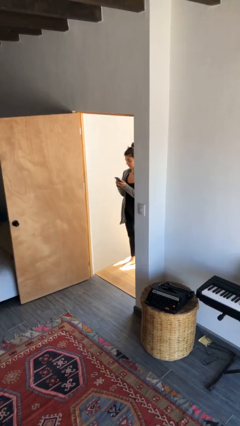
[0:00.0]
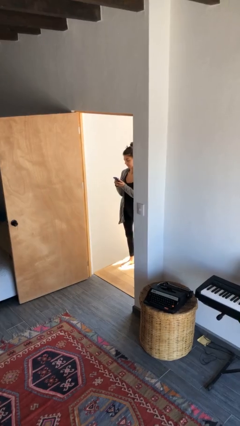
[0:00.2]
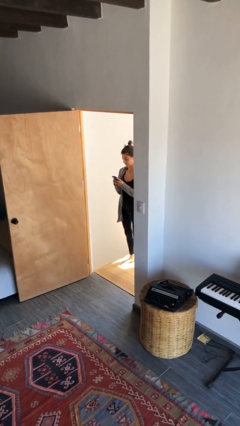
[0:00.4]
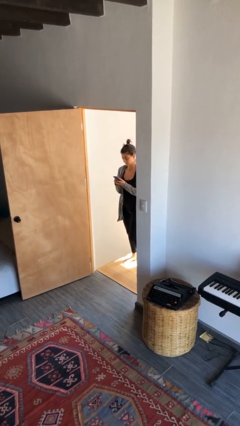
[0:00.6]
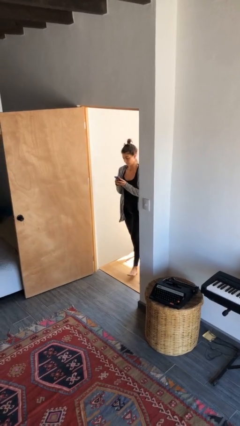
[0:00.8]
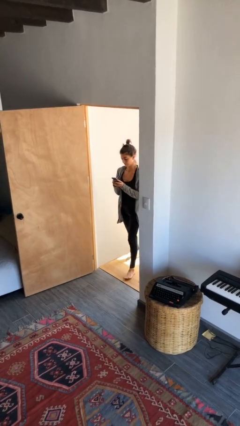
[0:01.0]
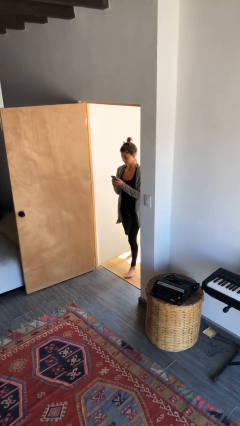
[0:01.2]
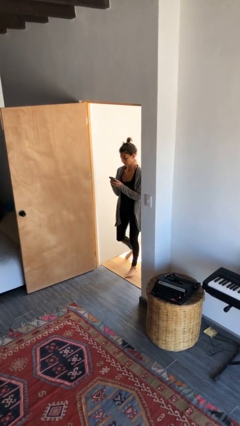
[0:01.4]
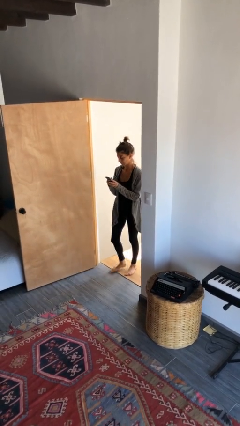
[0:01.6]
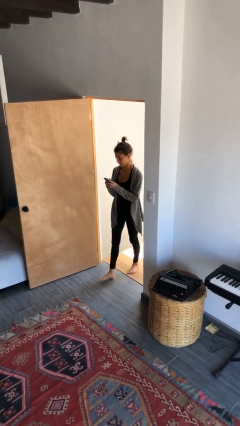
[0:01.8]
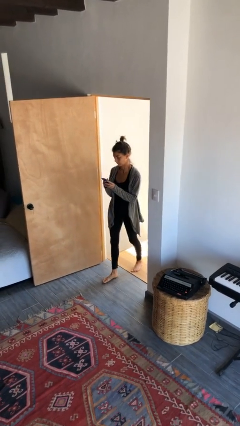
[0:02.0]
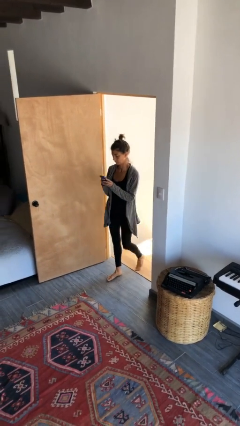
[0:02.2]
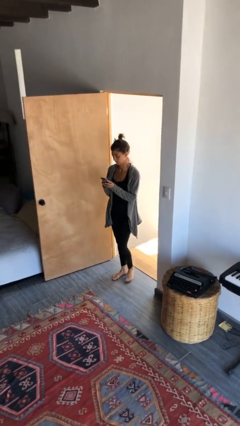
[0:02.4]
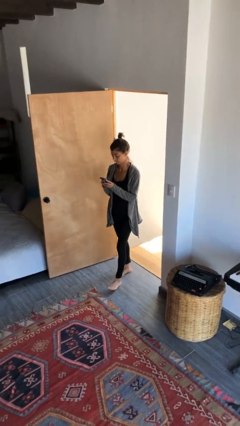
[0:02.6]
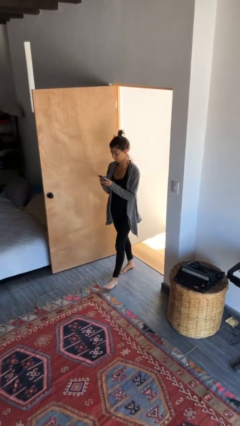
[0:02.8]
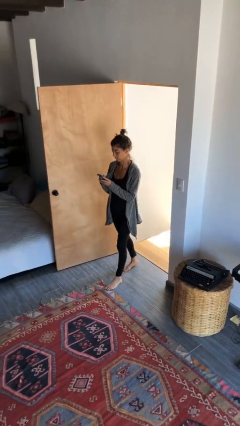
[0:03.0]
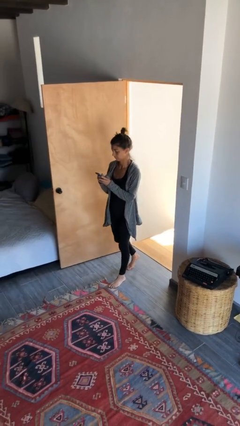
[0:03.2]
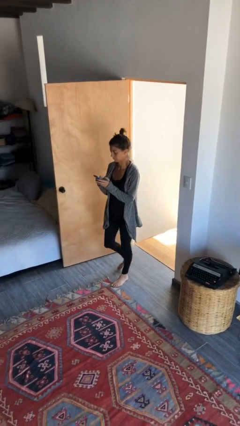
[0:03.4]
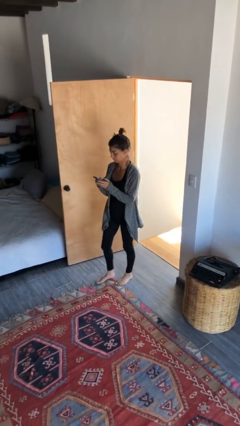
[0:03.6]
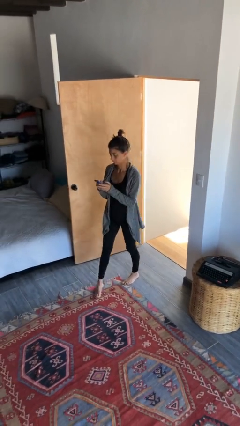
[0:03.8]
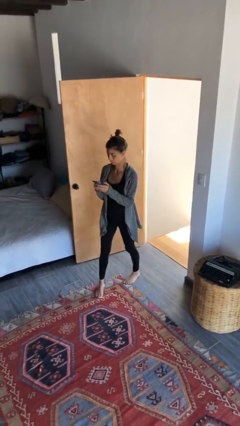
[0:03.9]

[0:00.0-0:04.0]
person enters scene through structure

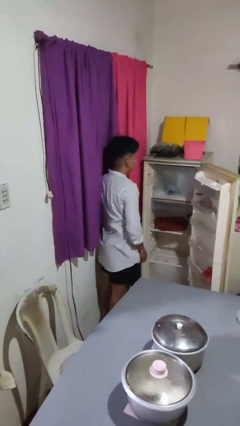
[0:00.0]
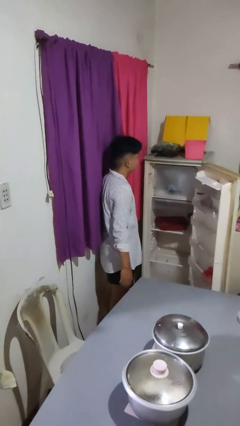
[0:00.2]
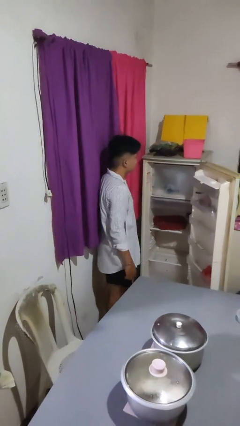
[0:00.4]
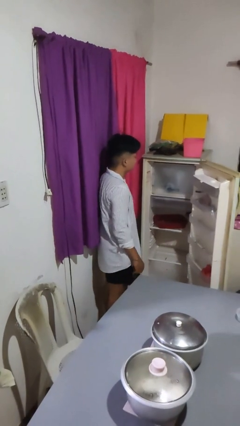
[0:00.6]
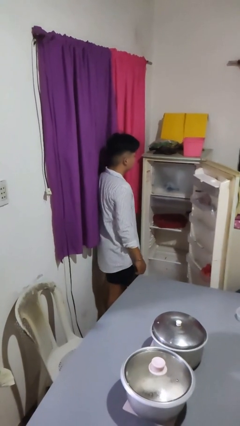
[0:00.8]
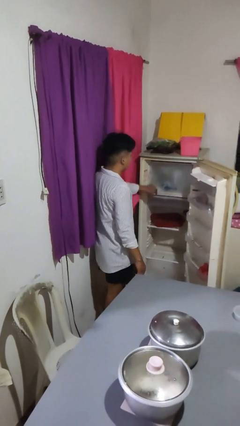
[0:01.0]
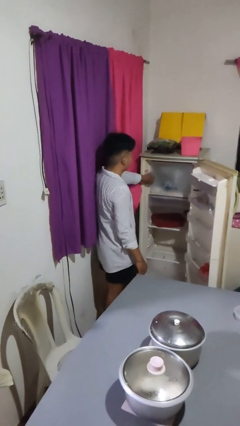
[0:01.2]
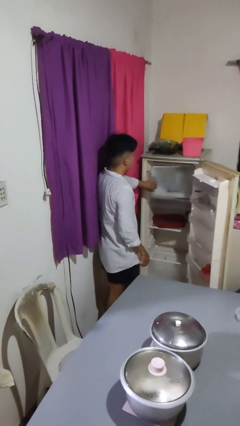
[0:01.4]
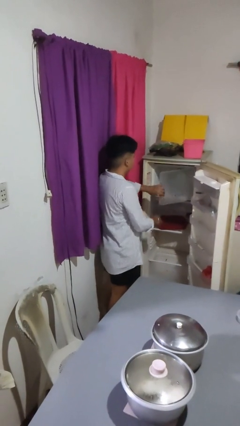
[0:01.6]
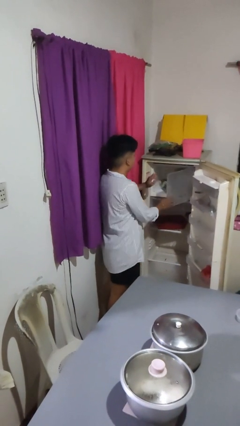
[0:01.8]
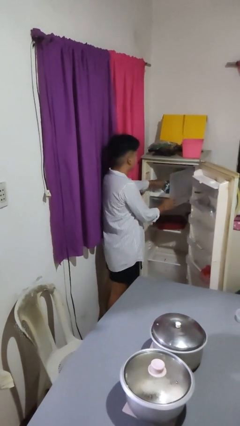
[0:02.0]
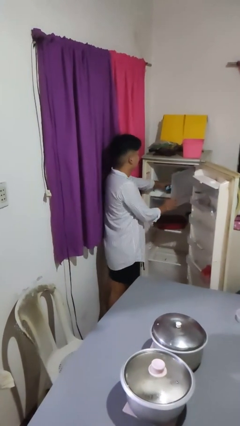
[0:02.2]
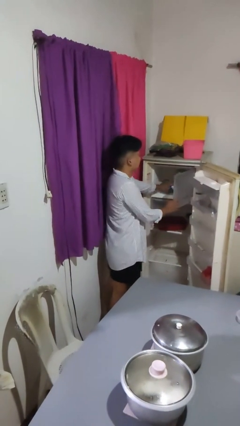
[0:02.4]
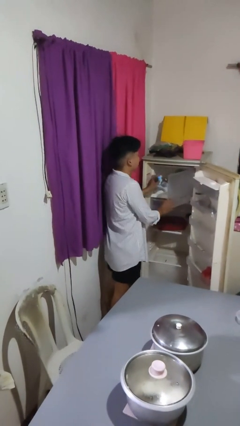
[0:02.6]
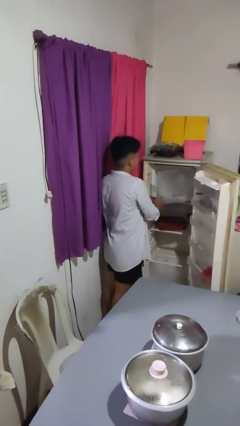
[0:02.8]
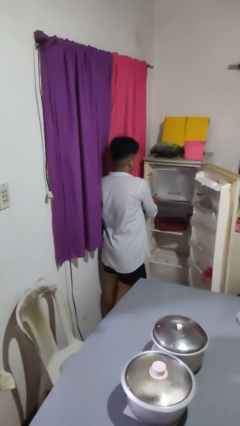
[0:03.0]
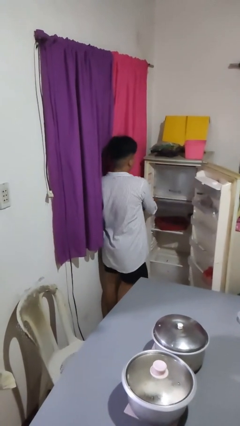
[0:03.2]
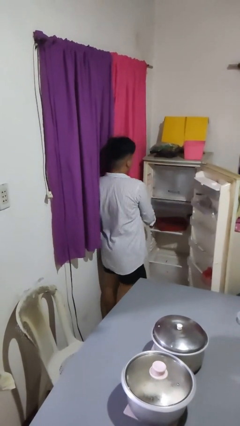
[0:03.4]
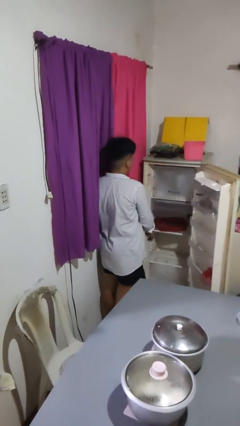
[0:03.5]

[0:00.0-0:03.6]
person takes object from refrigerator

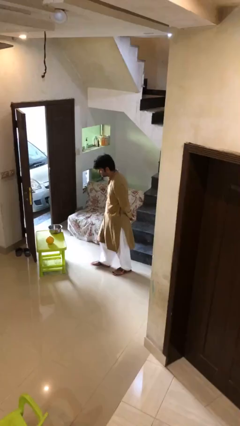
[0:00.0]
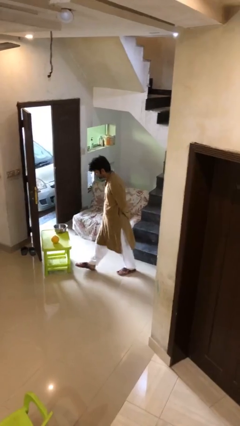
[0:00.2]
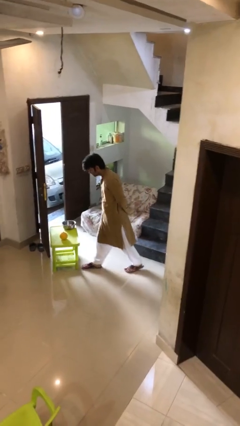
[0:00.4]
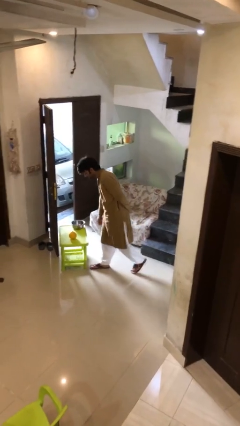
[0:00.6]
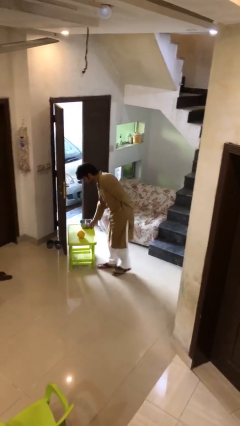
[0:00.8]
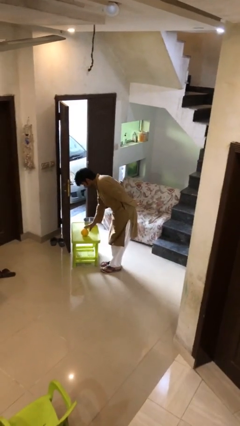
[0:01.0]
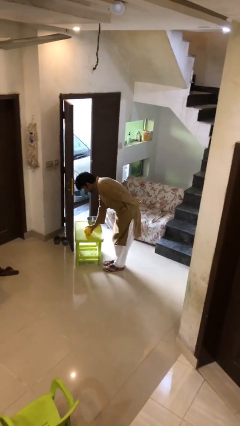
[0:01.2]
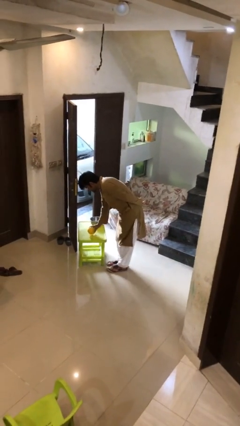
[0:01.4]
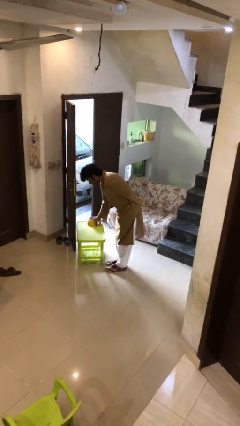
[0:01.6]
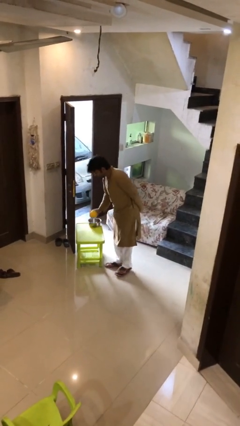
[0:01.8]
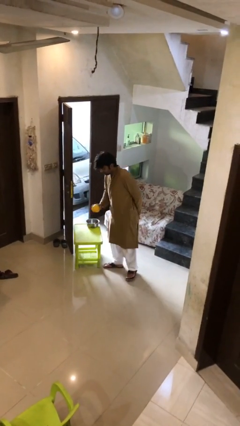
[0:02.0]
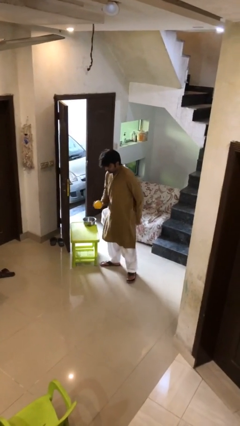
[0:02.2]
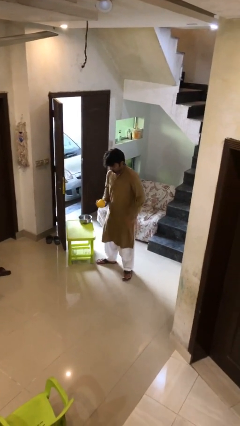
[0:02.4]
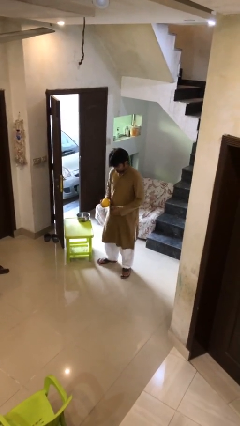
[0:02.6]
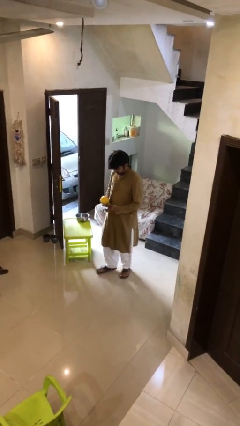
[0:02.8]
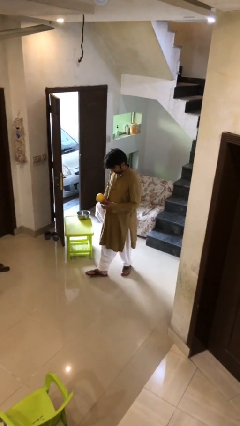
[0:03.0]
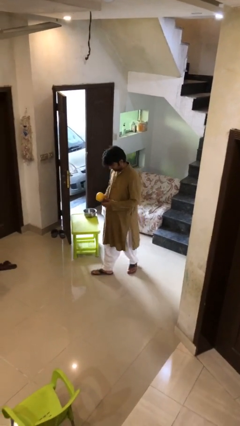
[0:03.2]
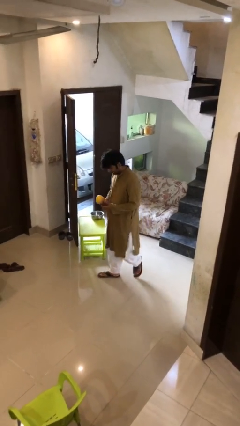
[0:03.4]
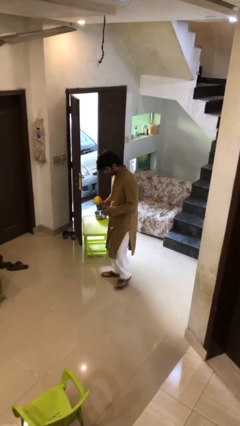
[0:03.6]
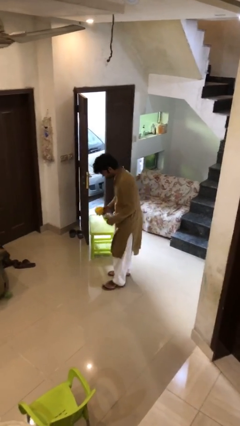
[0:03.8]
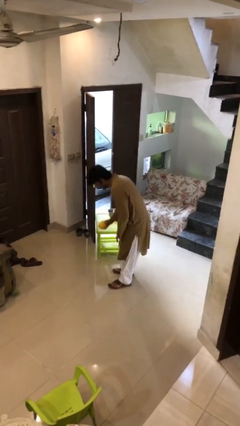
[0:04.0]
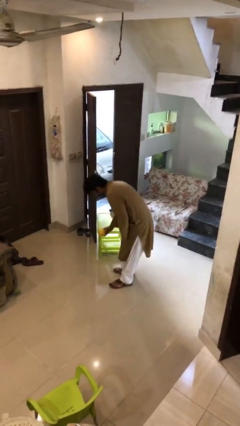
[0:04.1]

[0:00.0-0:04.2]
person picks up object from table

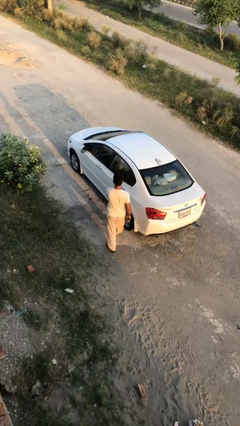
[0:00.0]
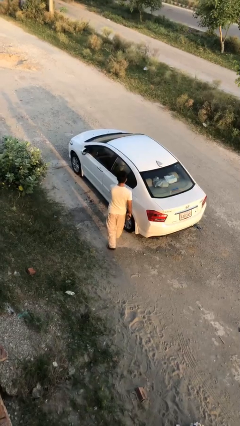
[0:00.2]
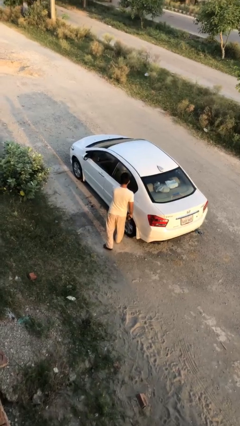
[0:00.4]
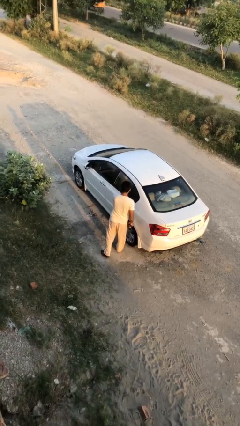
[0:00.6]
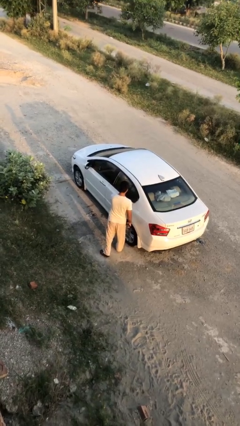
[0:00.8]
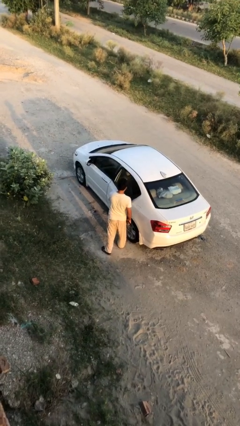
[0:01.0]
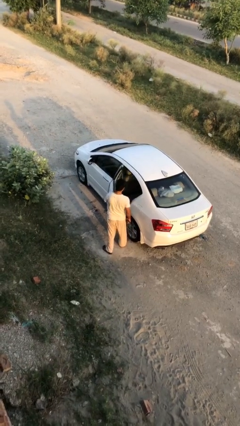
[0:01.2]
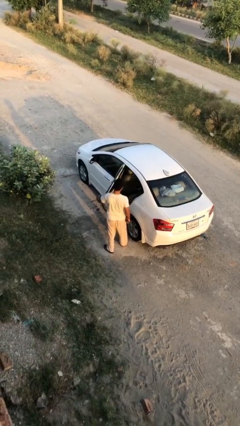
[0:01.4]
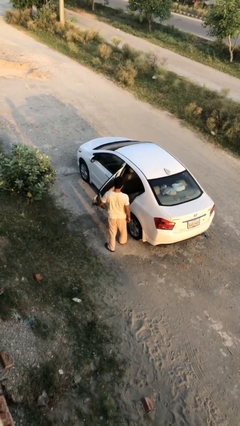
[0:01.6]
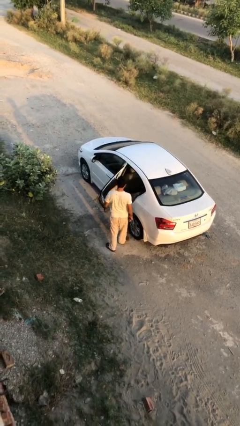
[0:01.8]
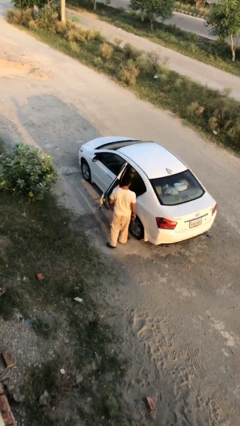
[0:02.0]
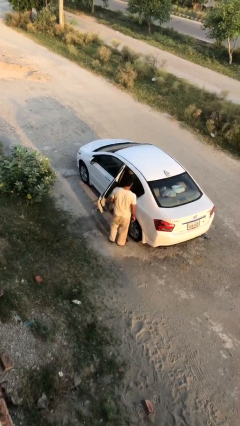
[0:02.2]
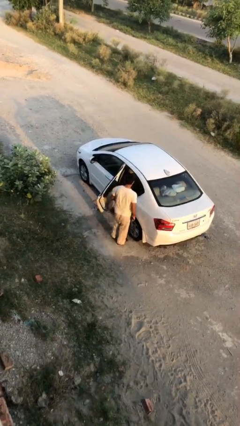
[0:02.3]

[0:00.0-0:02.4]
person opens car door

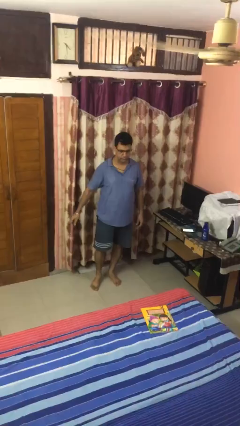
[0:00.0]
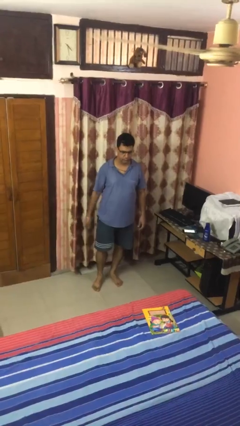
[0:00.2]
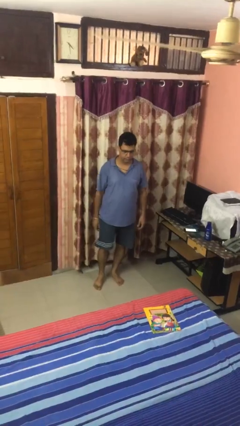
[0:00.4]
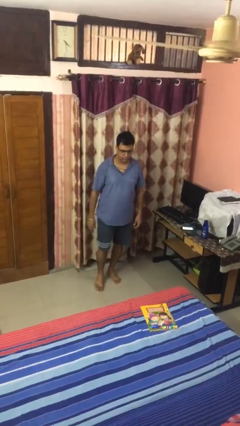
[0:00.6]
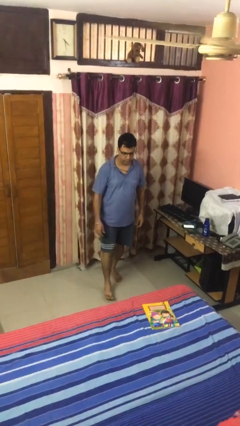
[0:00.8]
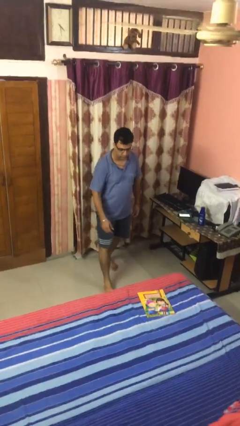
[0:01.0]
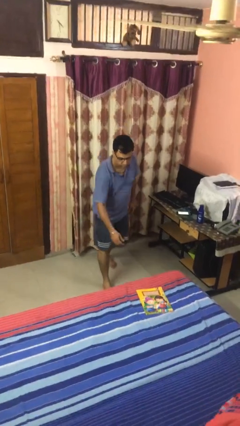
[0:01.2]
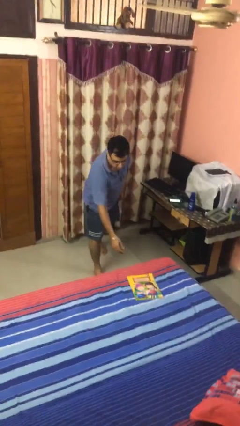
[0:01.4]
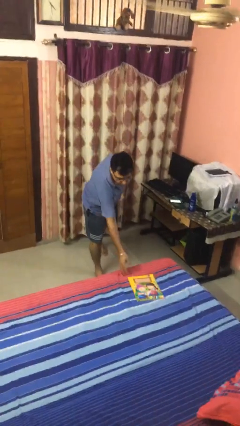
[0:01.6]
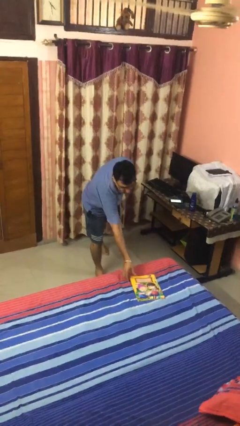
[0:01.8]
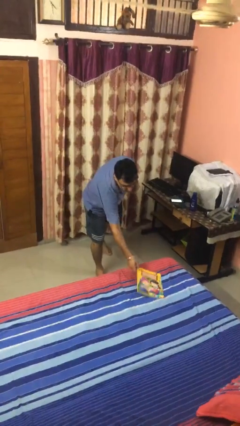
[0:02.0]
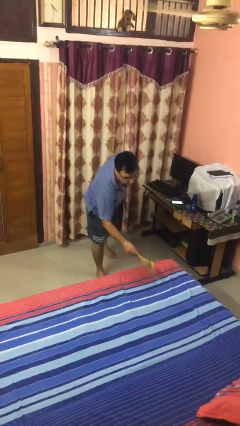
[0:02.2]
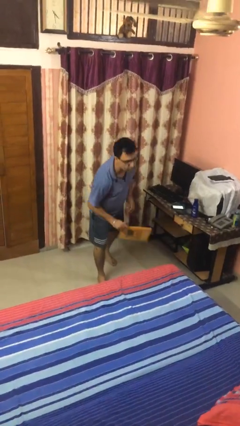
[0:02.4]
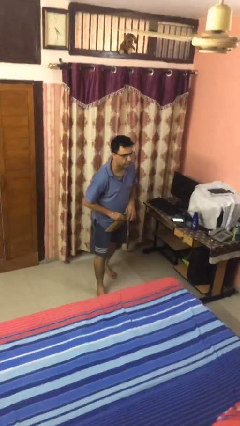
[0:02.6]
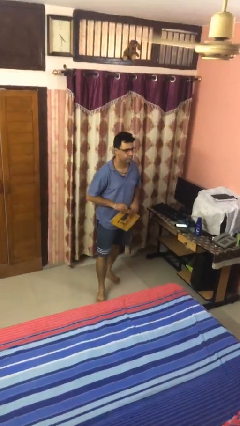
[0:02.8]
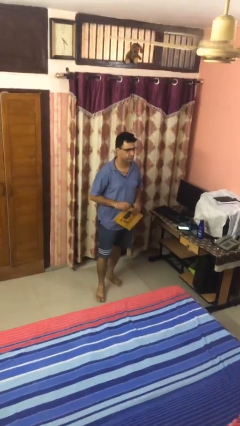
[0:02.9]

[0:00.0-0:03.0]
person picks up object from bed

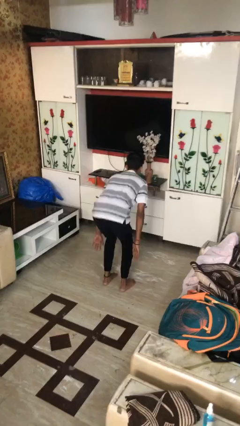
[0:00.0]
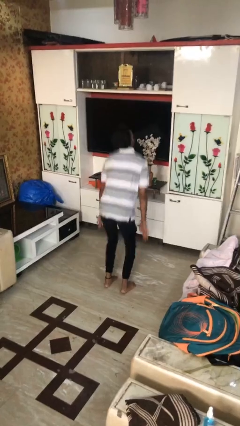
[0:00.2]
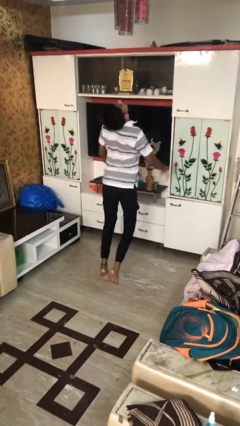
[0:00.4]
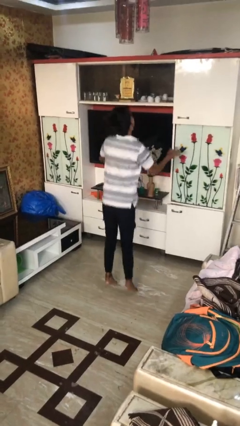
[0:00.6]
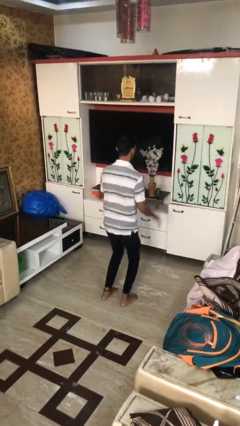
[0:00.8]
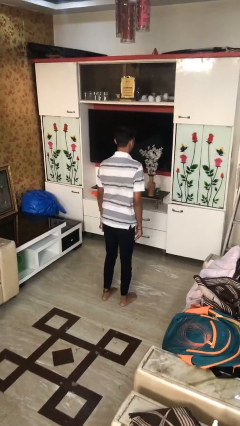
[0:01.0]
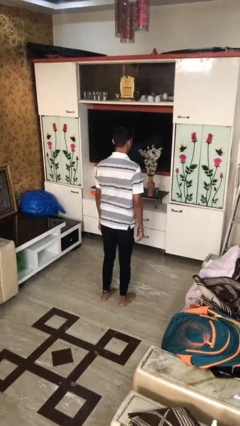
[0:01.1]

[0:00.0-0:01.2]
person somersaults
